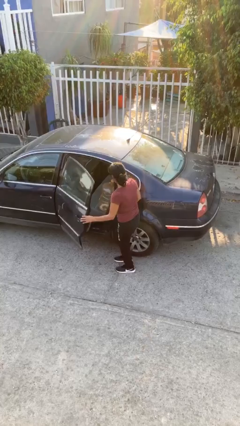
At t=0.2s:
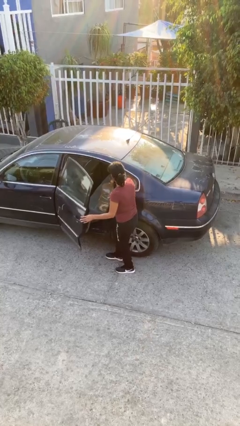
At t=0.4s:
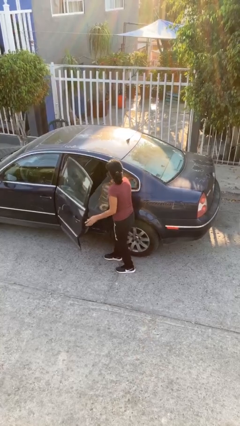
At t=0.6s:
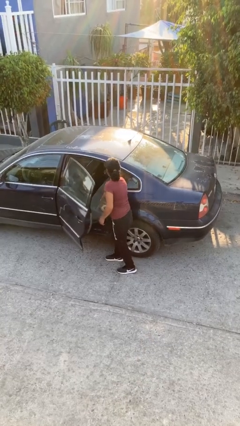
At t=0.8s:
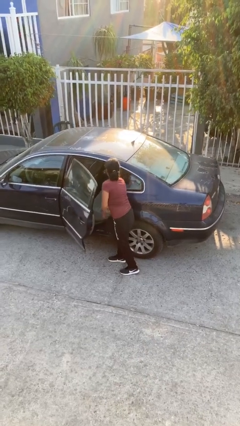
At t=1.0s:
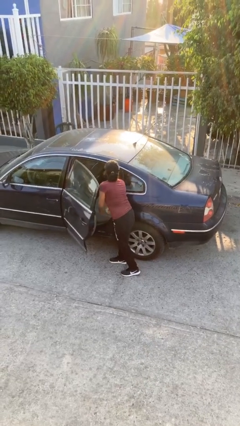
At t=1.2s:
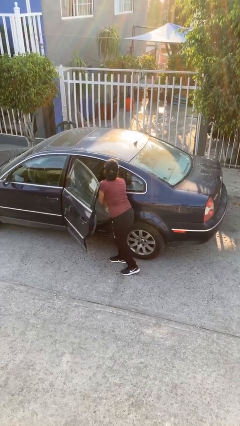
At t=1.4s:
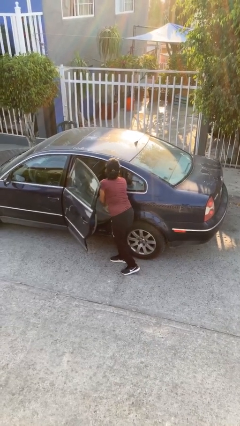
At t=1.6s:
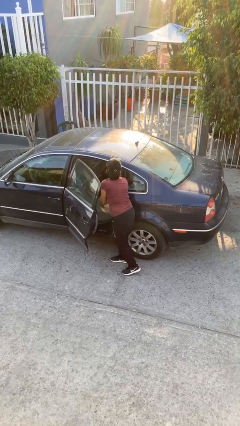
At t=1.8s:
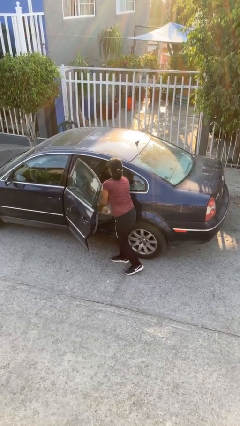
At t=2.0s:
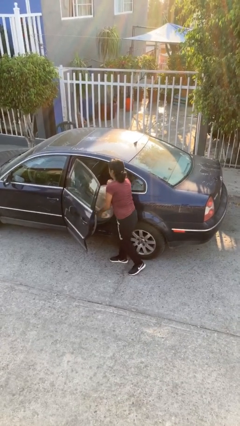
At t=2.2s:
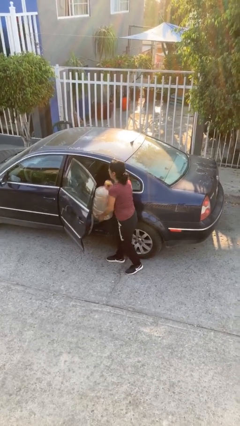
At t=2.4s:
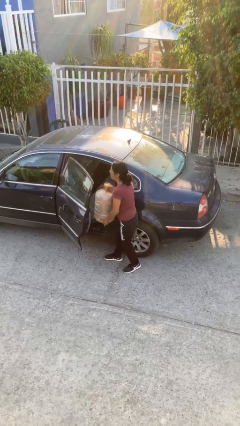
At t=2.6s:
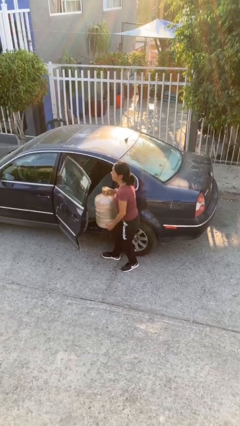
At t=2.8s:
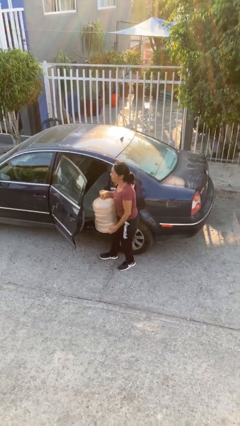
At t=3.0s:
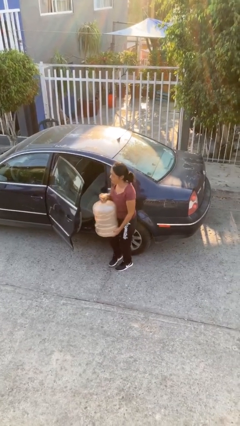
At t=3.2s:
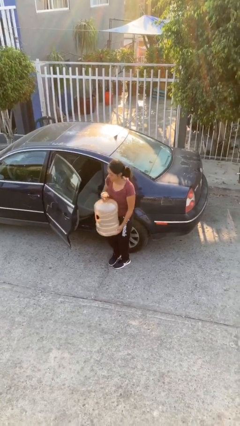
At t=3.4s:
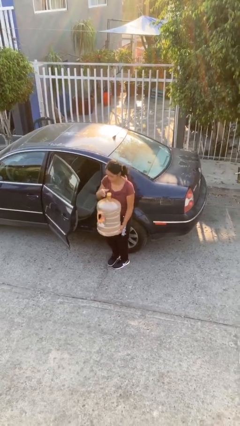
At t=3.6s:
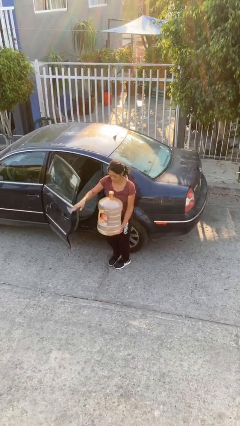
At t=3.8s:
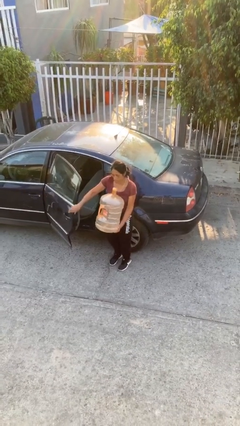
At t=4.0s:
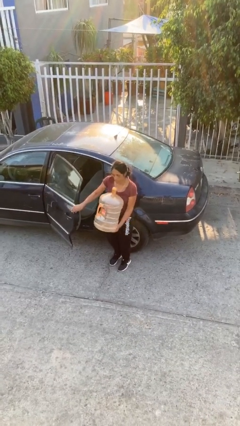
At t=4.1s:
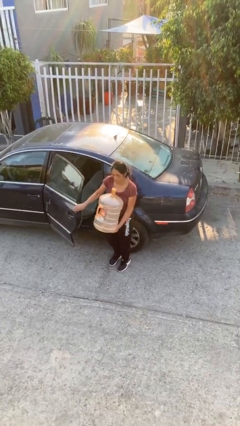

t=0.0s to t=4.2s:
person unloads car

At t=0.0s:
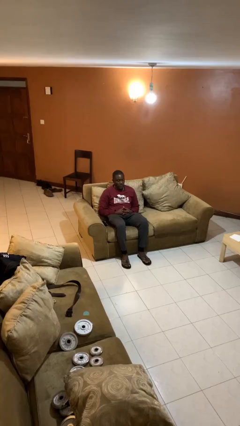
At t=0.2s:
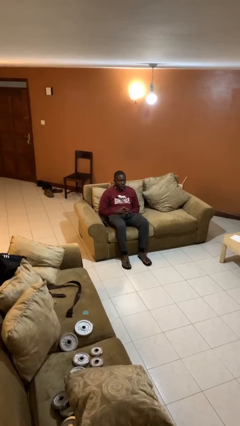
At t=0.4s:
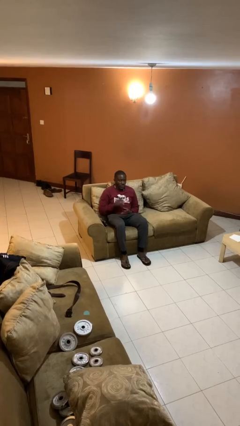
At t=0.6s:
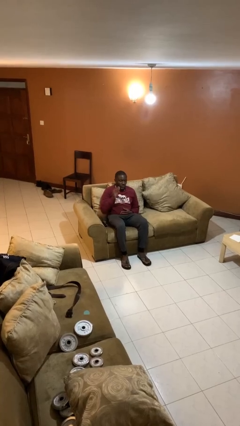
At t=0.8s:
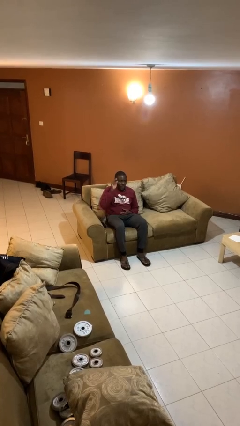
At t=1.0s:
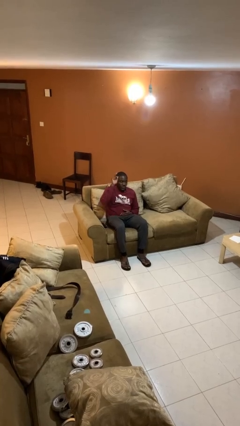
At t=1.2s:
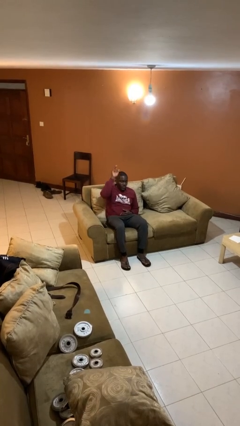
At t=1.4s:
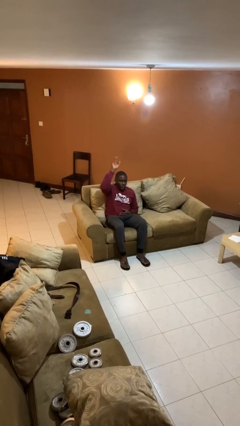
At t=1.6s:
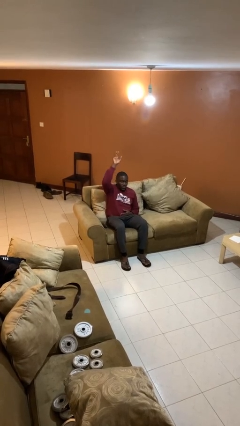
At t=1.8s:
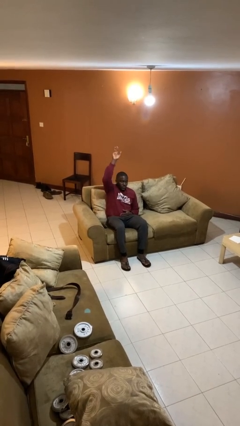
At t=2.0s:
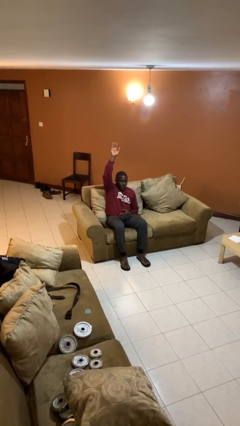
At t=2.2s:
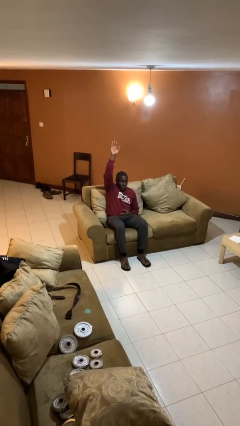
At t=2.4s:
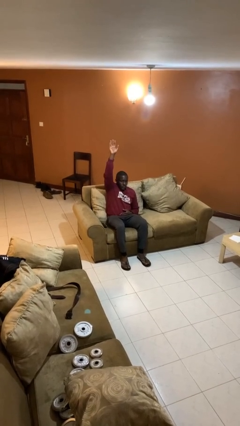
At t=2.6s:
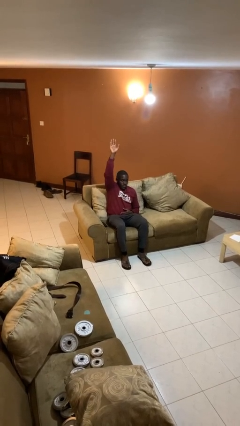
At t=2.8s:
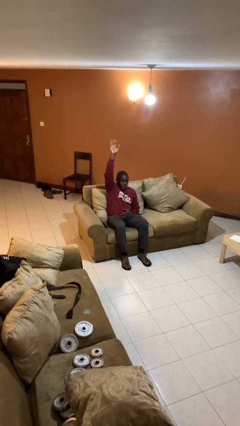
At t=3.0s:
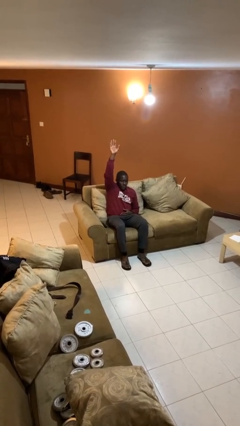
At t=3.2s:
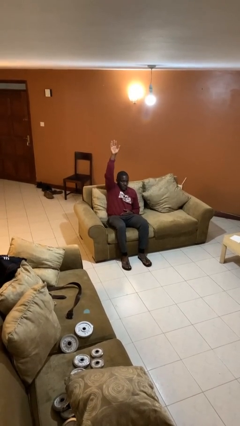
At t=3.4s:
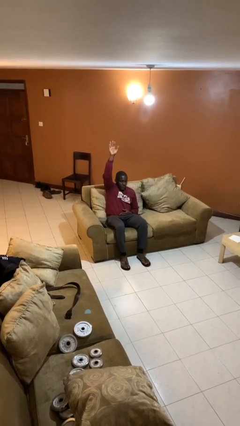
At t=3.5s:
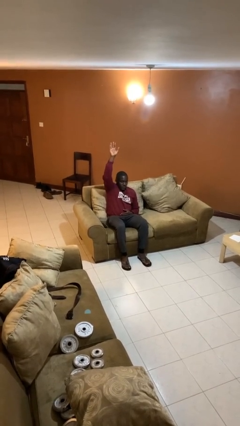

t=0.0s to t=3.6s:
person gestures raise hand

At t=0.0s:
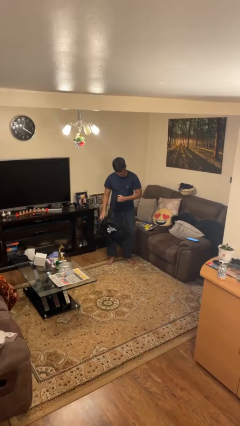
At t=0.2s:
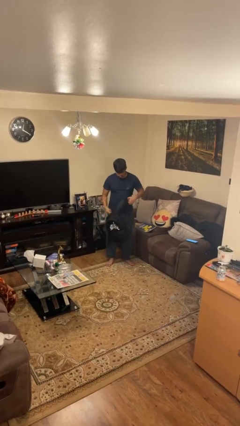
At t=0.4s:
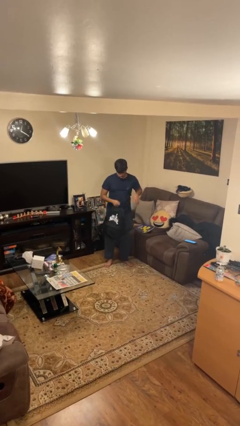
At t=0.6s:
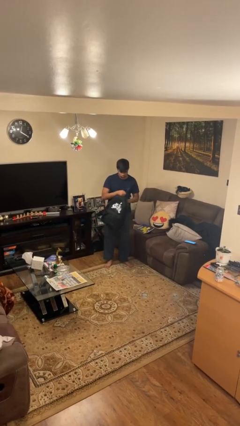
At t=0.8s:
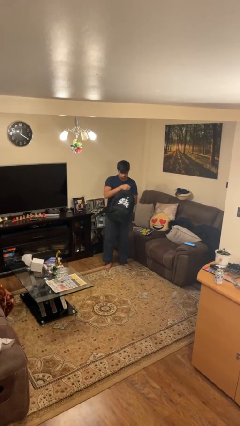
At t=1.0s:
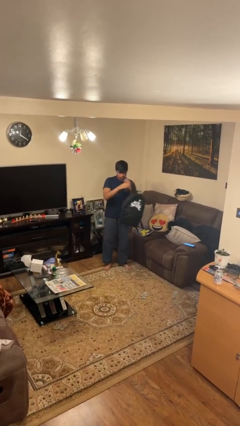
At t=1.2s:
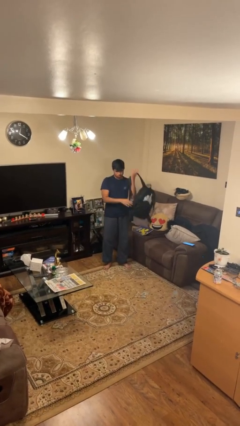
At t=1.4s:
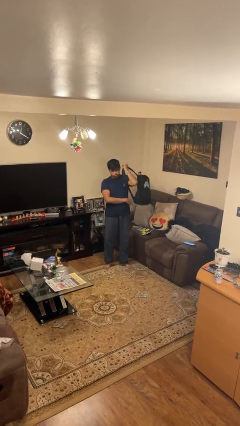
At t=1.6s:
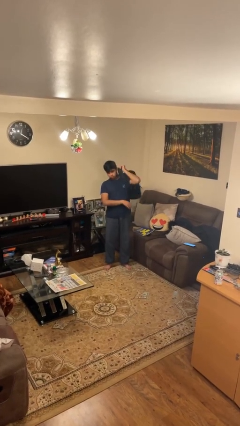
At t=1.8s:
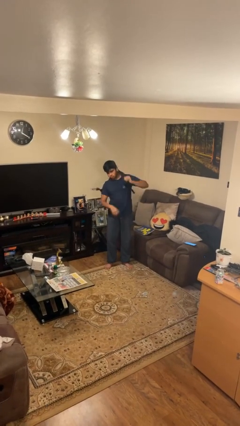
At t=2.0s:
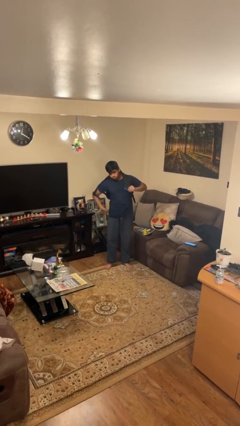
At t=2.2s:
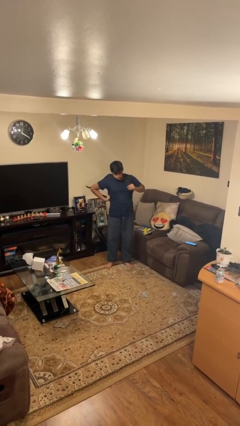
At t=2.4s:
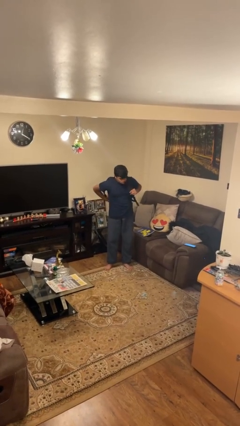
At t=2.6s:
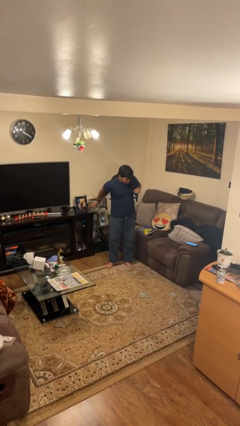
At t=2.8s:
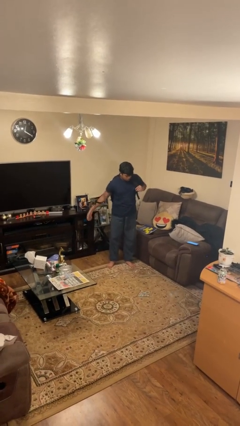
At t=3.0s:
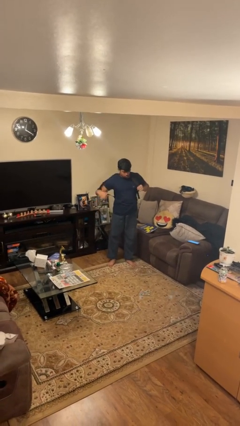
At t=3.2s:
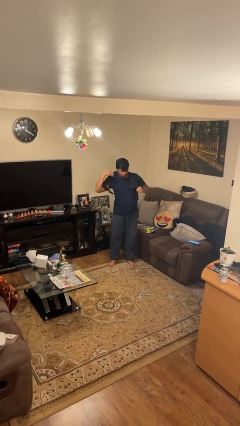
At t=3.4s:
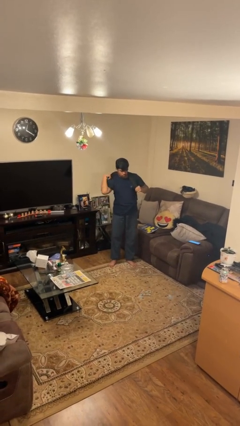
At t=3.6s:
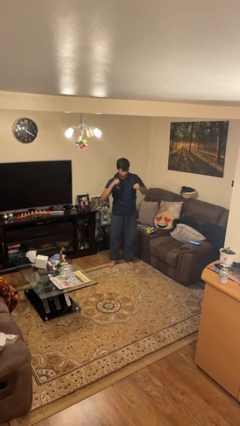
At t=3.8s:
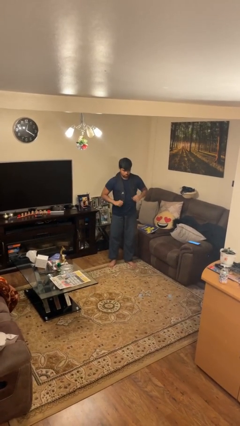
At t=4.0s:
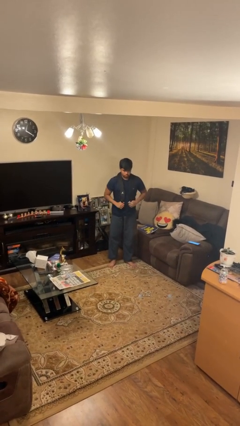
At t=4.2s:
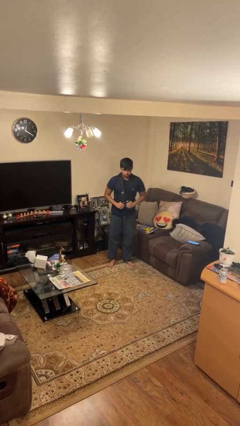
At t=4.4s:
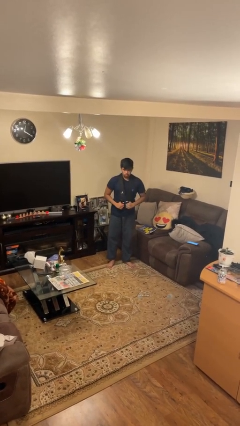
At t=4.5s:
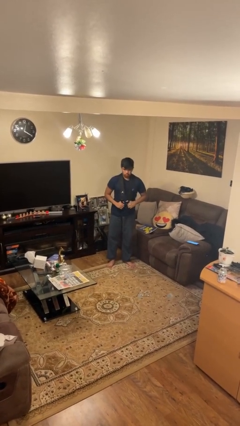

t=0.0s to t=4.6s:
person puts on backpack

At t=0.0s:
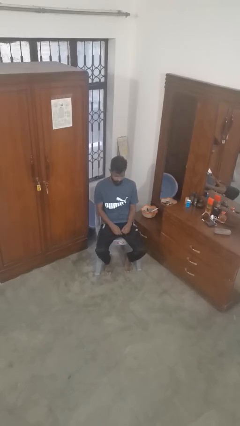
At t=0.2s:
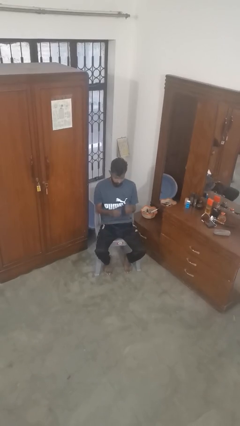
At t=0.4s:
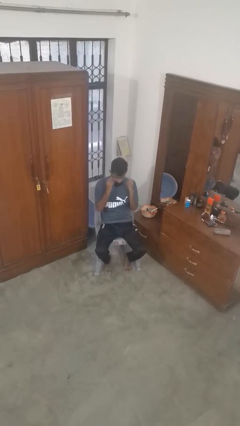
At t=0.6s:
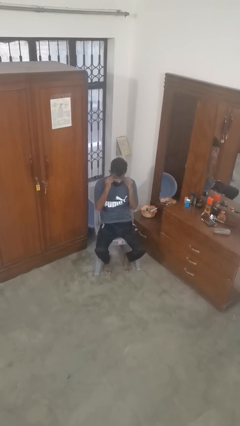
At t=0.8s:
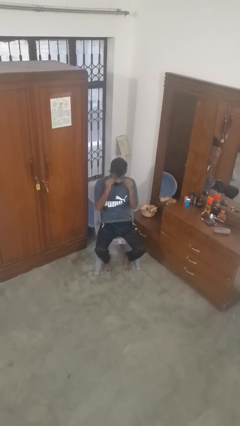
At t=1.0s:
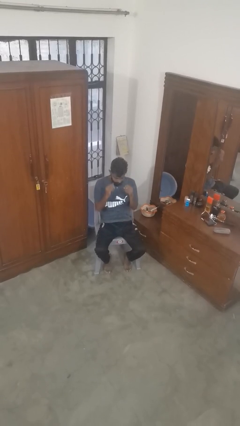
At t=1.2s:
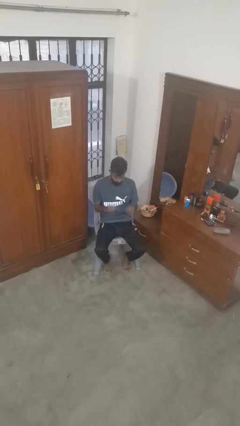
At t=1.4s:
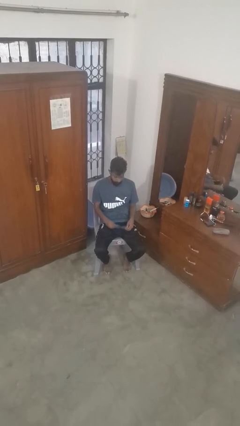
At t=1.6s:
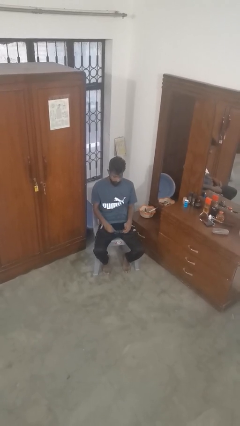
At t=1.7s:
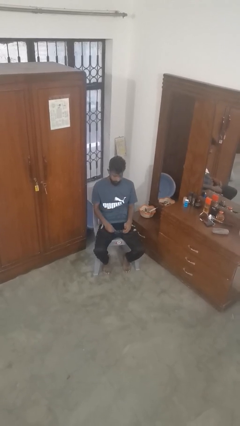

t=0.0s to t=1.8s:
person takes off glasses

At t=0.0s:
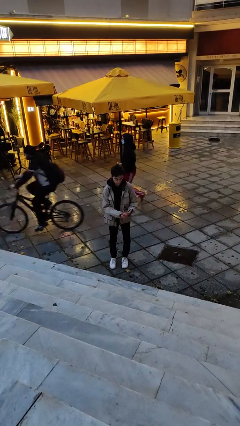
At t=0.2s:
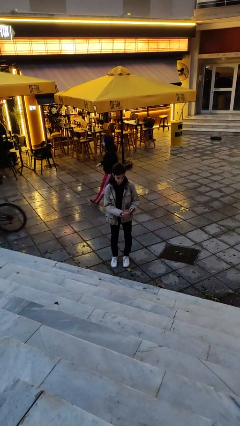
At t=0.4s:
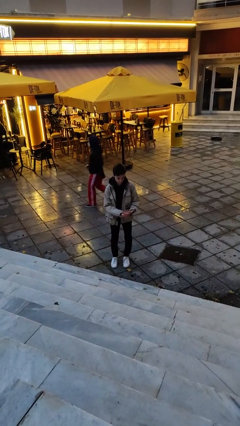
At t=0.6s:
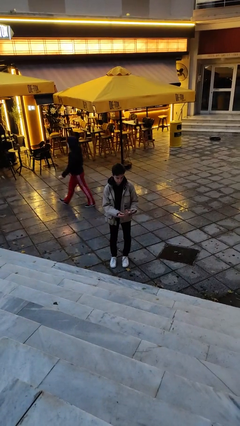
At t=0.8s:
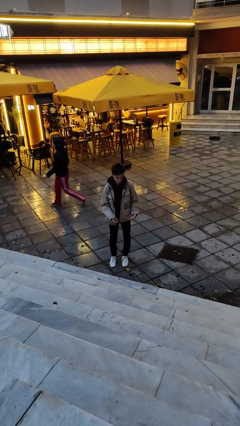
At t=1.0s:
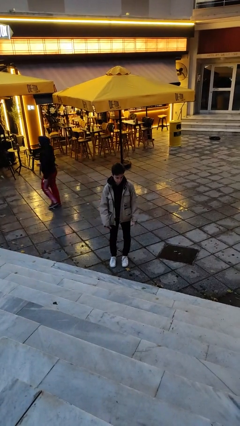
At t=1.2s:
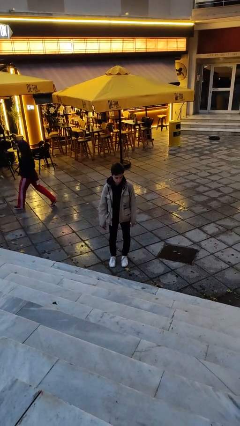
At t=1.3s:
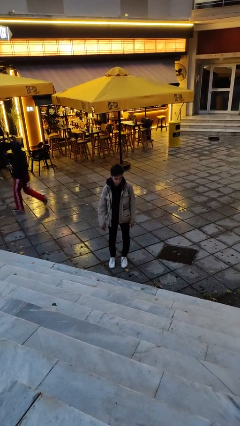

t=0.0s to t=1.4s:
person takes off ring

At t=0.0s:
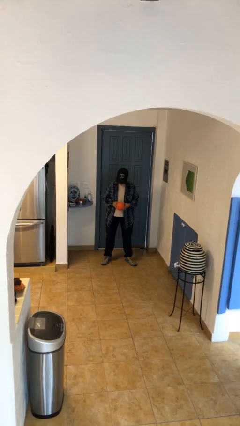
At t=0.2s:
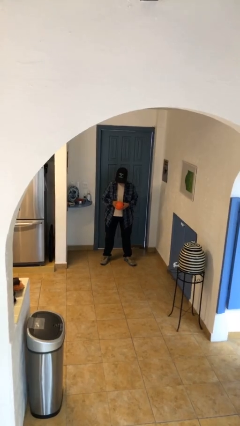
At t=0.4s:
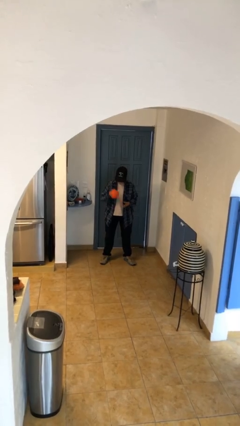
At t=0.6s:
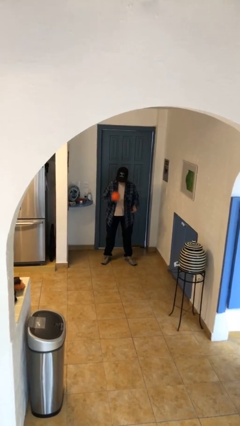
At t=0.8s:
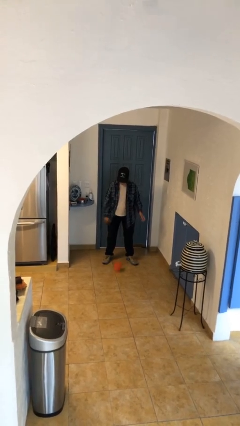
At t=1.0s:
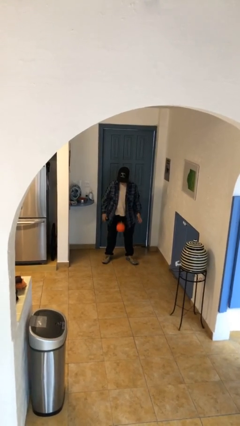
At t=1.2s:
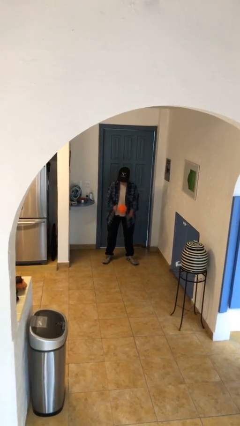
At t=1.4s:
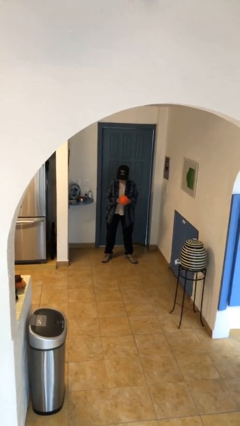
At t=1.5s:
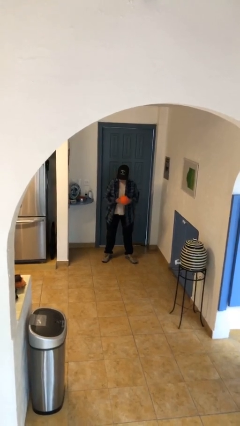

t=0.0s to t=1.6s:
person bounces ball on floor
